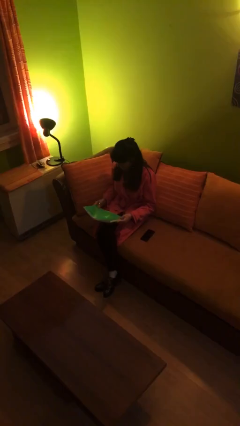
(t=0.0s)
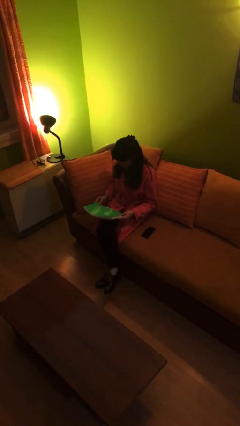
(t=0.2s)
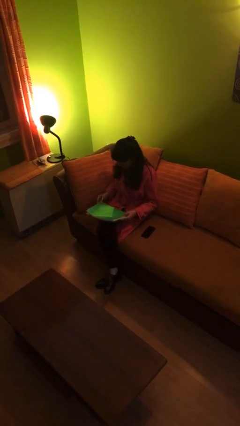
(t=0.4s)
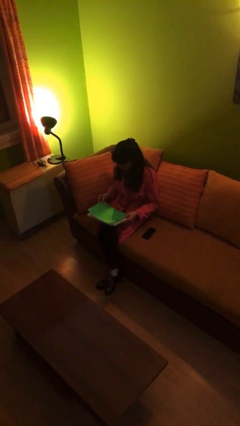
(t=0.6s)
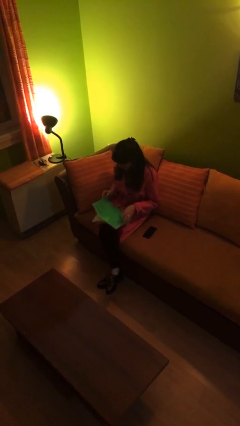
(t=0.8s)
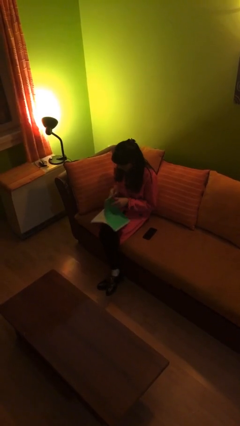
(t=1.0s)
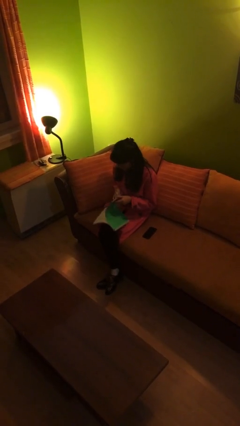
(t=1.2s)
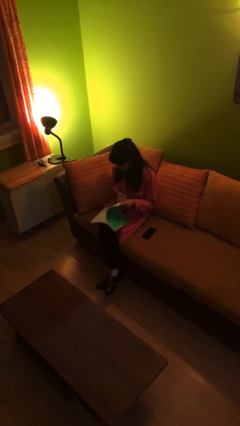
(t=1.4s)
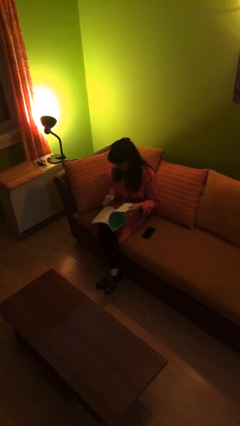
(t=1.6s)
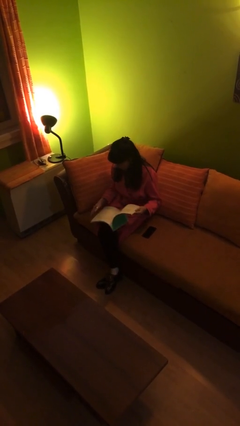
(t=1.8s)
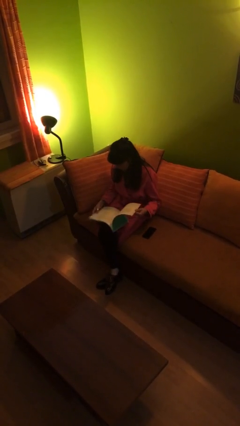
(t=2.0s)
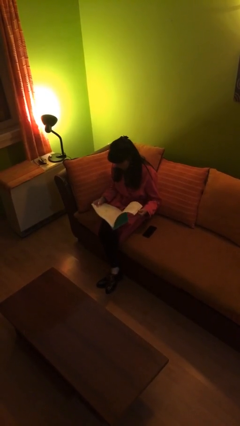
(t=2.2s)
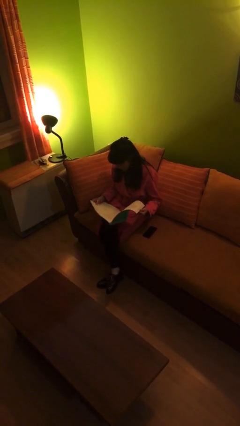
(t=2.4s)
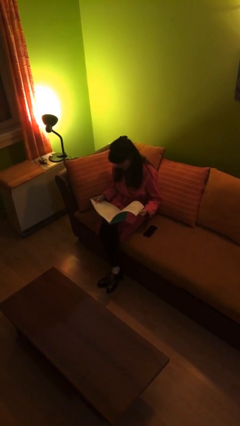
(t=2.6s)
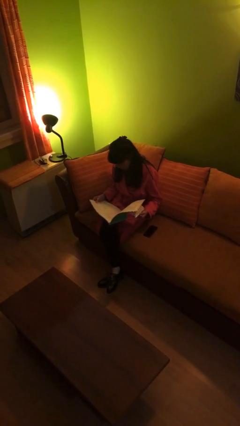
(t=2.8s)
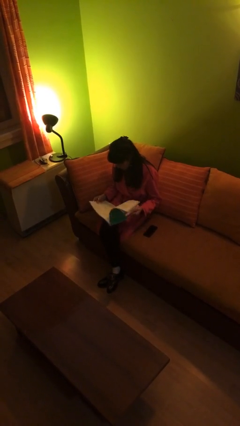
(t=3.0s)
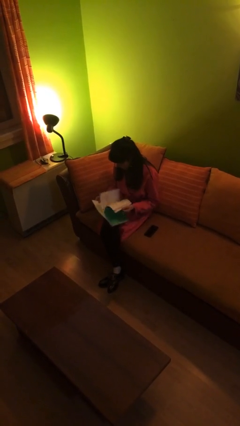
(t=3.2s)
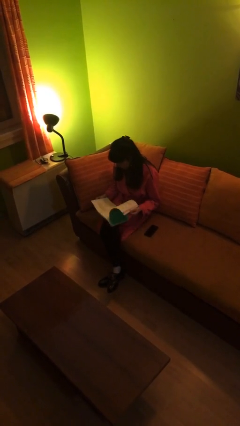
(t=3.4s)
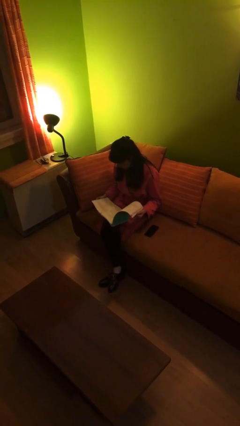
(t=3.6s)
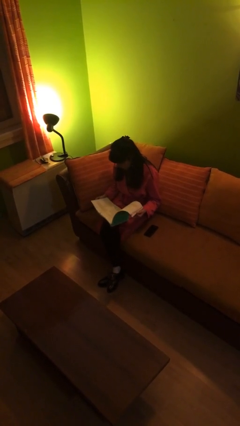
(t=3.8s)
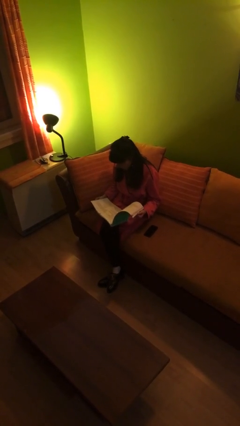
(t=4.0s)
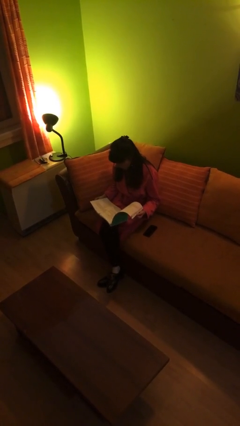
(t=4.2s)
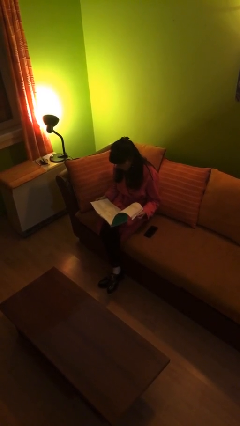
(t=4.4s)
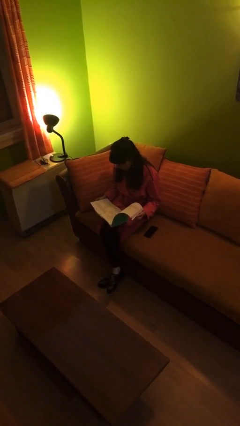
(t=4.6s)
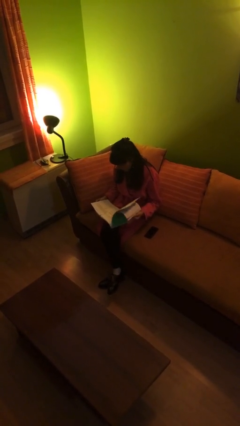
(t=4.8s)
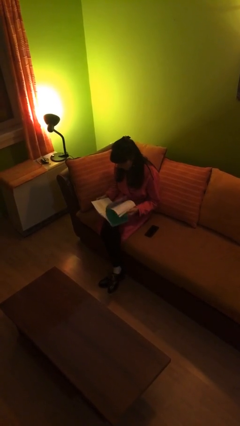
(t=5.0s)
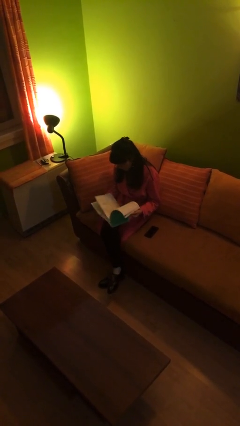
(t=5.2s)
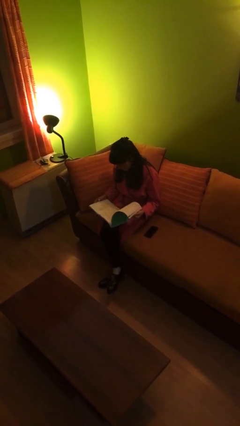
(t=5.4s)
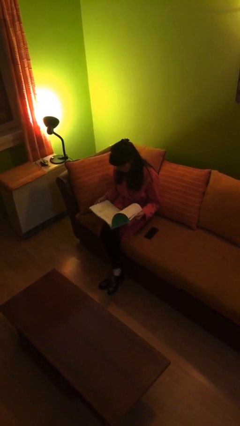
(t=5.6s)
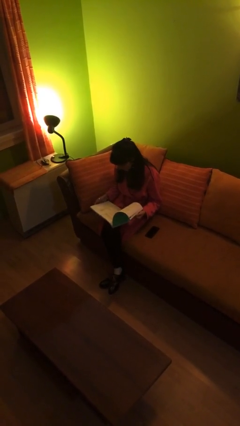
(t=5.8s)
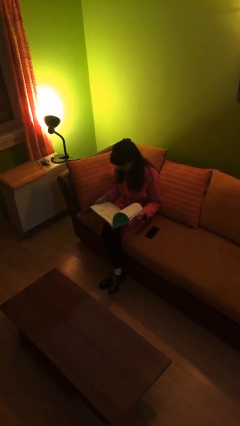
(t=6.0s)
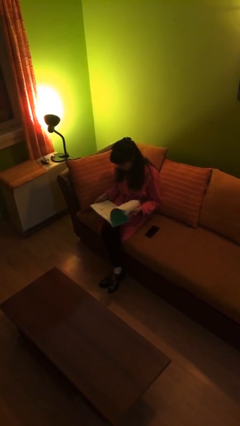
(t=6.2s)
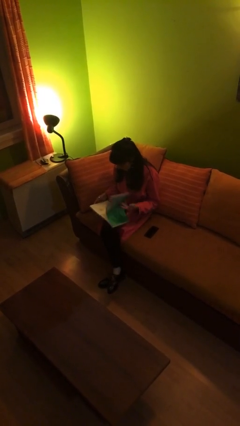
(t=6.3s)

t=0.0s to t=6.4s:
person reads document

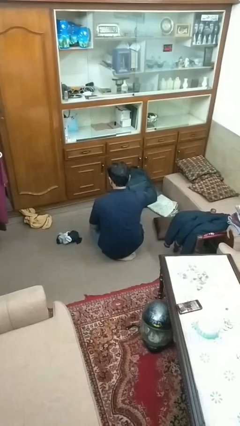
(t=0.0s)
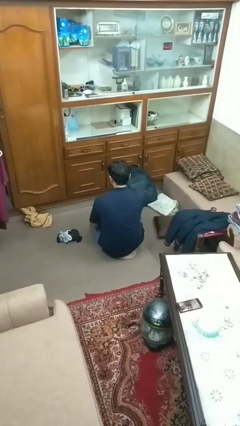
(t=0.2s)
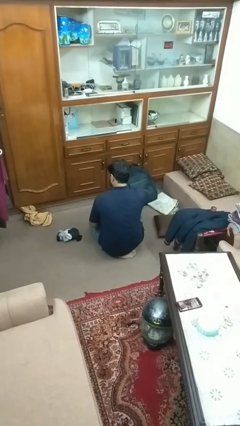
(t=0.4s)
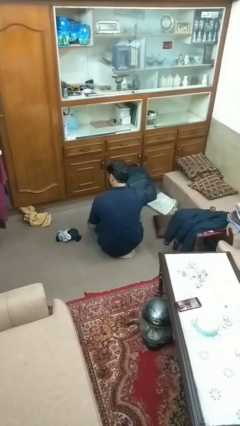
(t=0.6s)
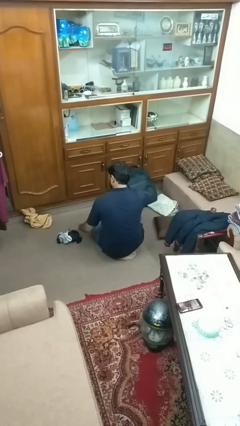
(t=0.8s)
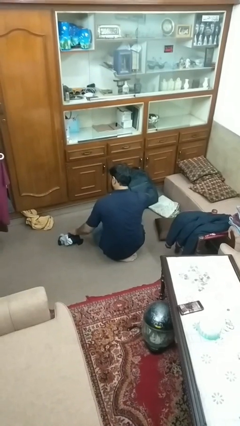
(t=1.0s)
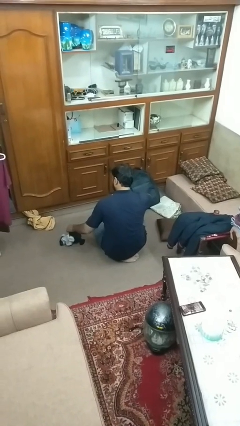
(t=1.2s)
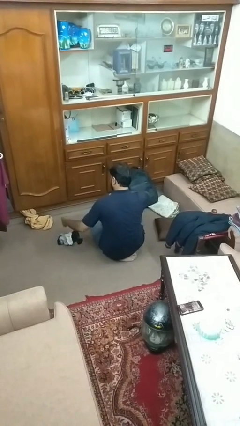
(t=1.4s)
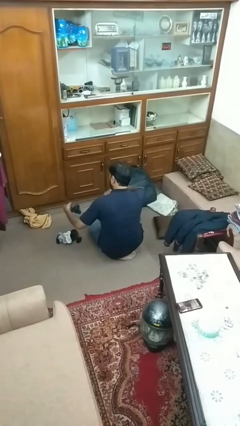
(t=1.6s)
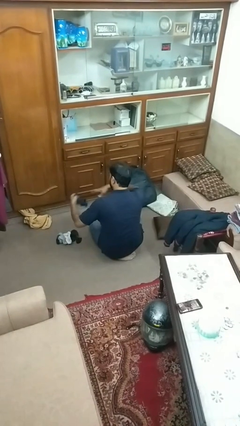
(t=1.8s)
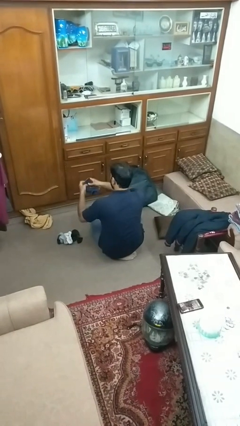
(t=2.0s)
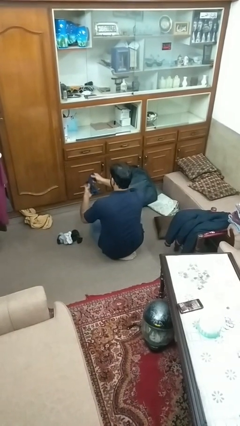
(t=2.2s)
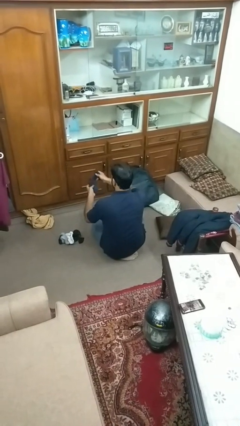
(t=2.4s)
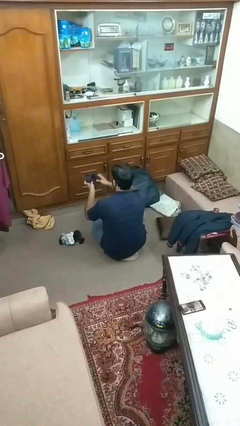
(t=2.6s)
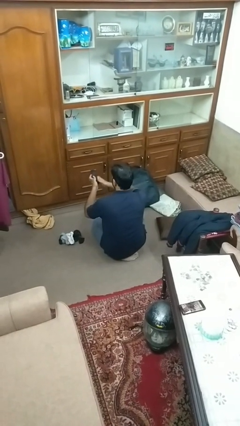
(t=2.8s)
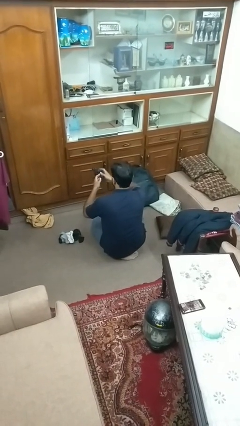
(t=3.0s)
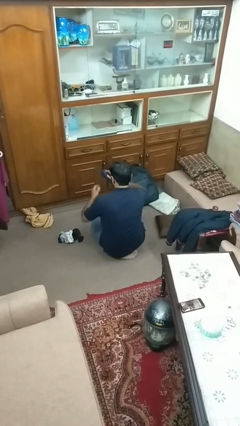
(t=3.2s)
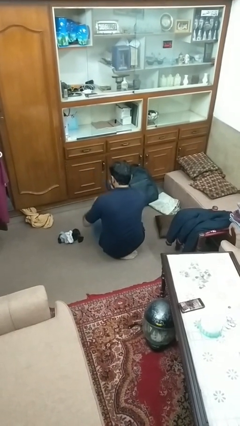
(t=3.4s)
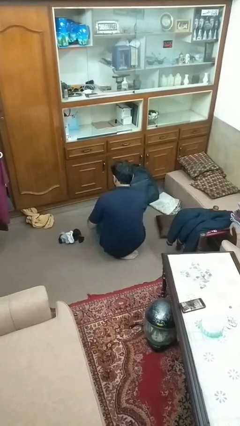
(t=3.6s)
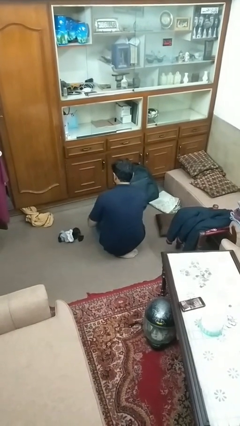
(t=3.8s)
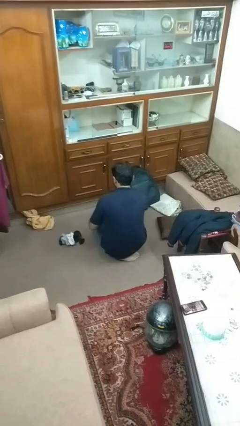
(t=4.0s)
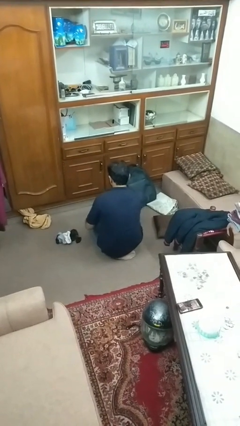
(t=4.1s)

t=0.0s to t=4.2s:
person folds socks

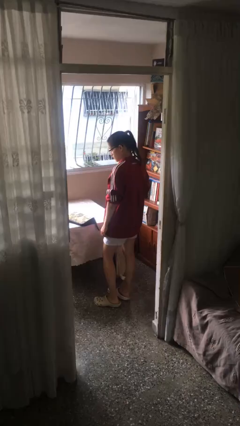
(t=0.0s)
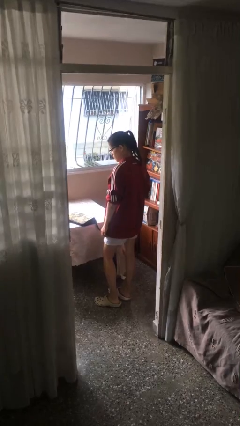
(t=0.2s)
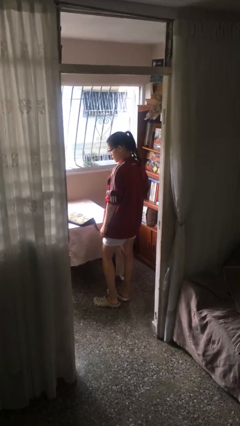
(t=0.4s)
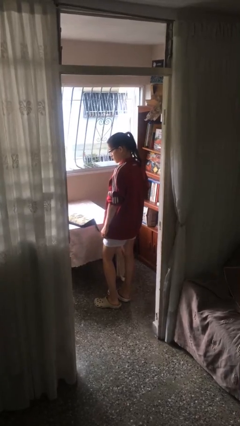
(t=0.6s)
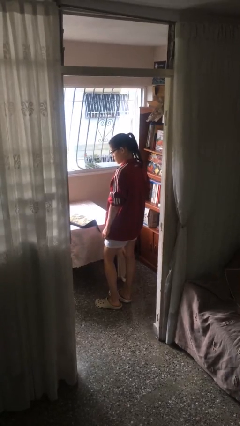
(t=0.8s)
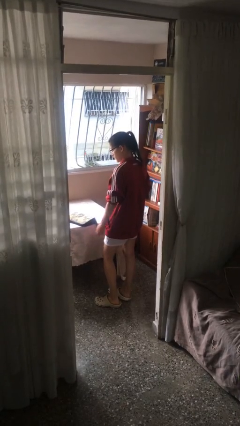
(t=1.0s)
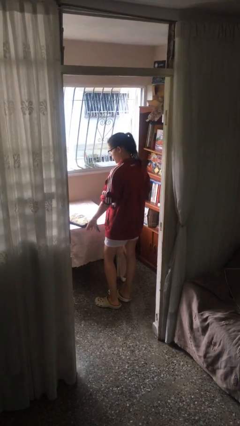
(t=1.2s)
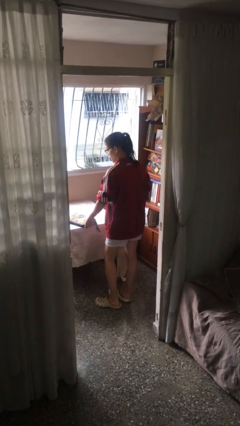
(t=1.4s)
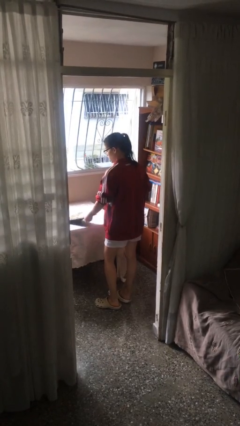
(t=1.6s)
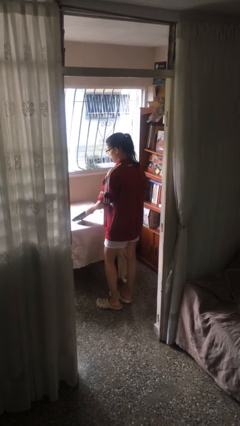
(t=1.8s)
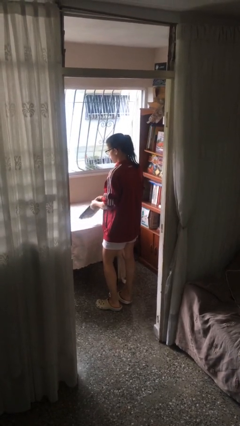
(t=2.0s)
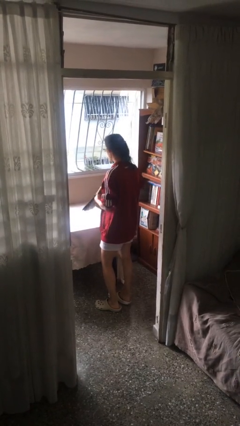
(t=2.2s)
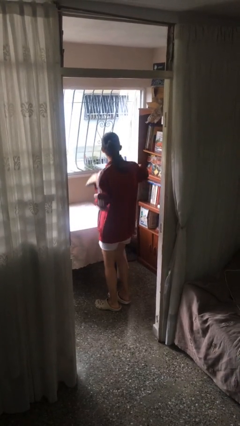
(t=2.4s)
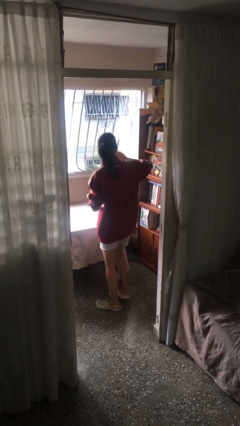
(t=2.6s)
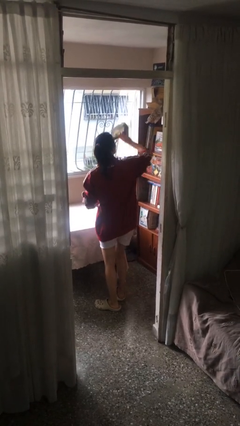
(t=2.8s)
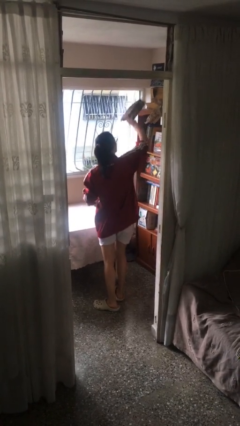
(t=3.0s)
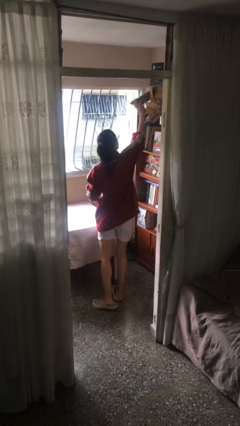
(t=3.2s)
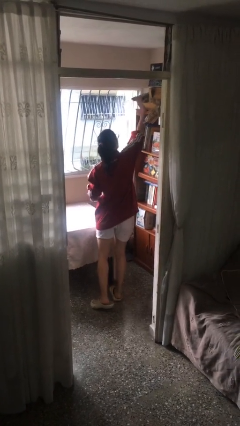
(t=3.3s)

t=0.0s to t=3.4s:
person picks up object from table

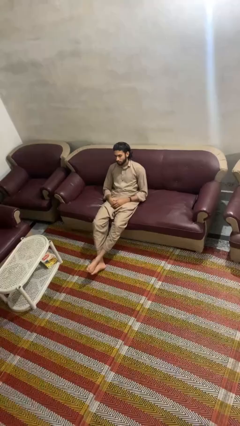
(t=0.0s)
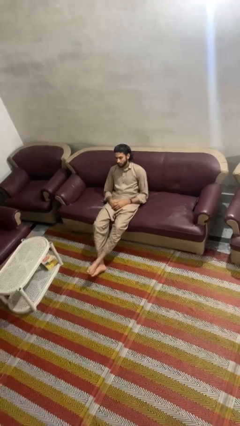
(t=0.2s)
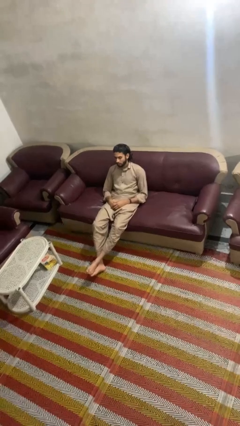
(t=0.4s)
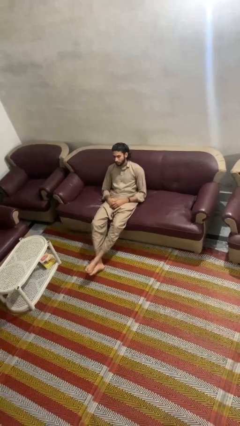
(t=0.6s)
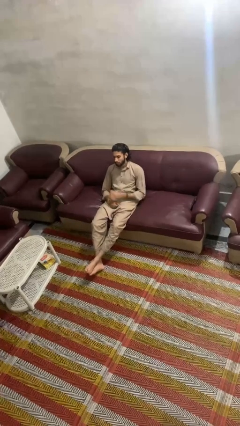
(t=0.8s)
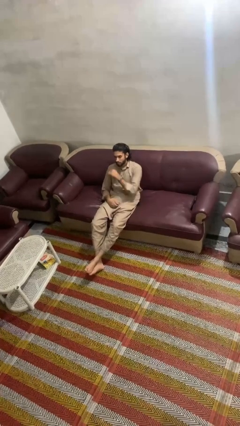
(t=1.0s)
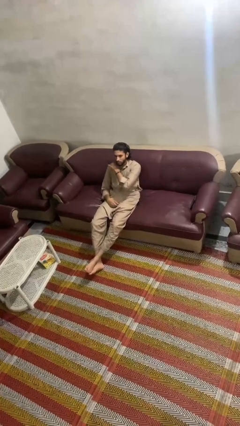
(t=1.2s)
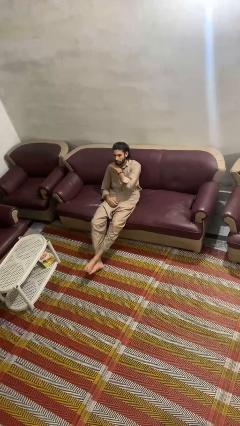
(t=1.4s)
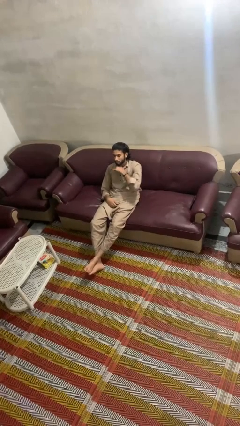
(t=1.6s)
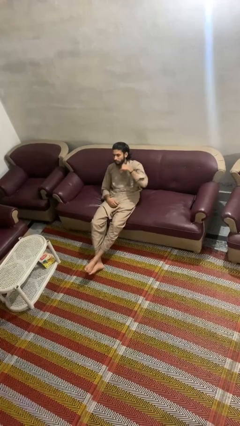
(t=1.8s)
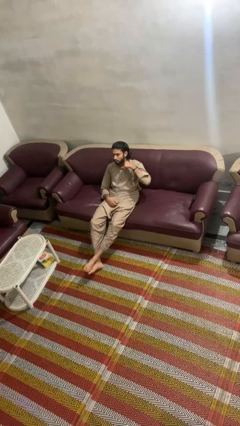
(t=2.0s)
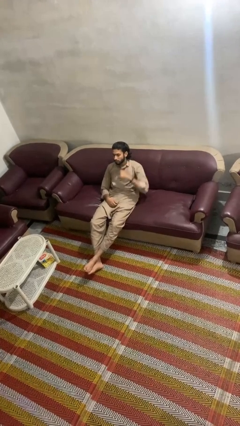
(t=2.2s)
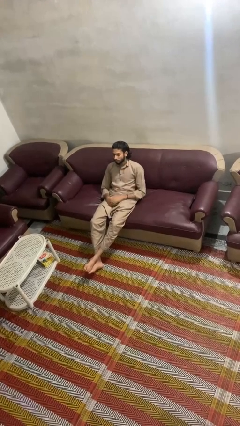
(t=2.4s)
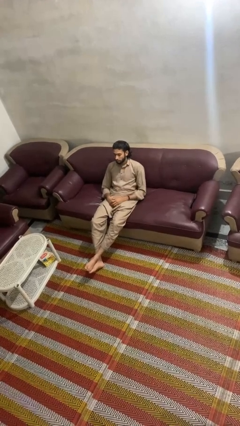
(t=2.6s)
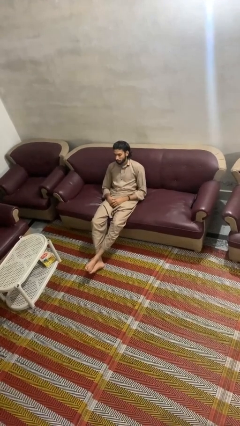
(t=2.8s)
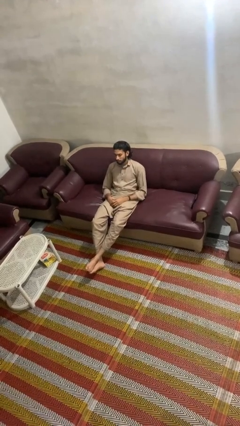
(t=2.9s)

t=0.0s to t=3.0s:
person gestures cut

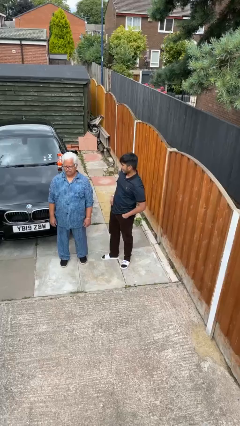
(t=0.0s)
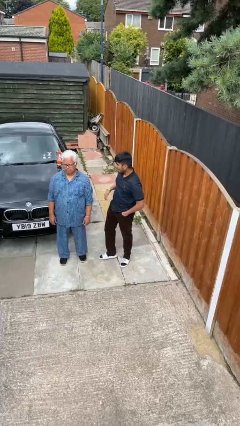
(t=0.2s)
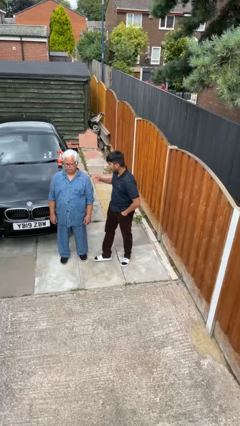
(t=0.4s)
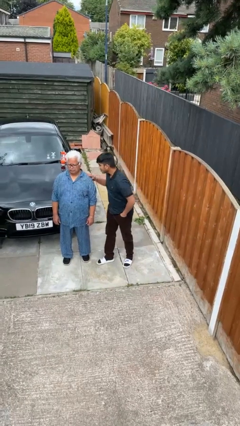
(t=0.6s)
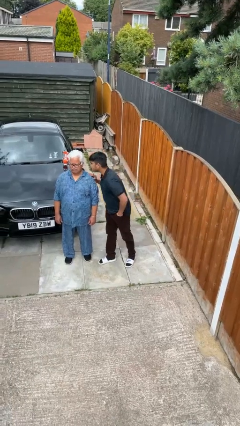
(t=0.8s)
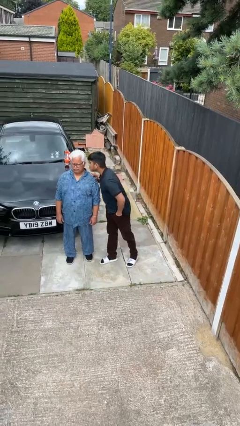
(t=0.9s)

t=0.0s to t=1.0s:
person kisses cheek of person
